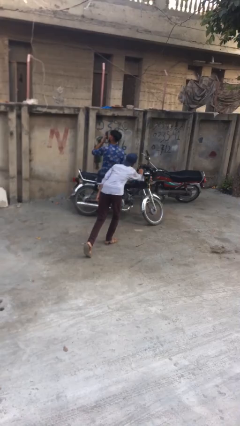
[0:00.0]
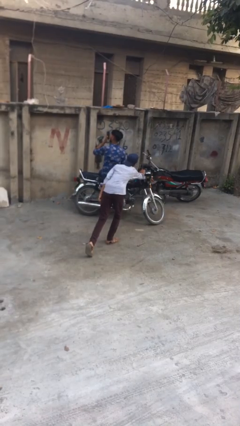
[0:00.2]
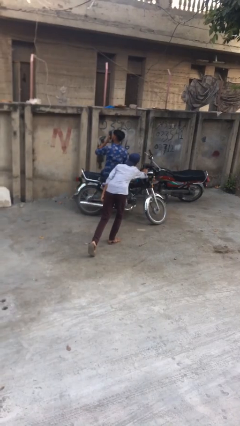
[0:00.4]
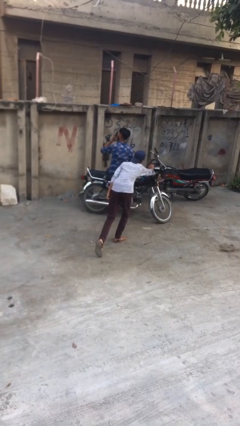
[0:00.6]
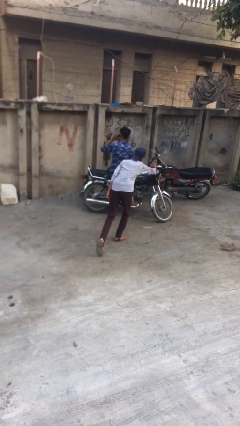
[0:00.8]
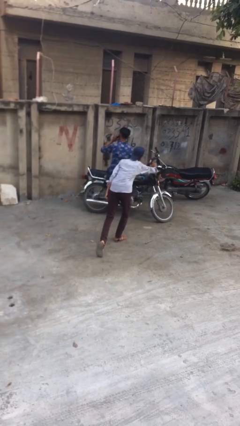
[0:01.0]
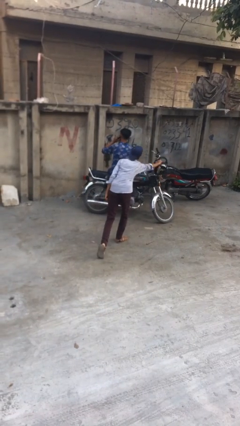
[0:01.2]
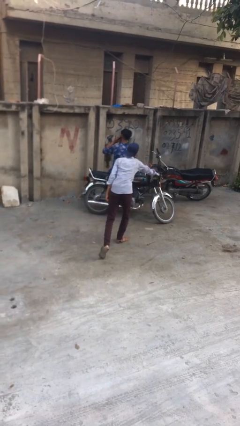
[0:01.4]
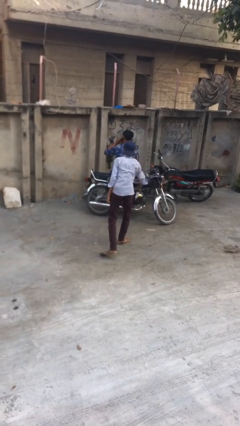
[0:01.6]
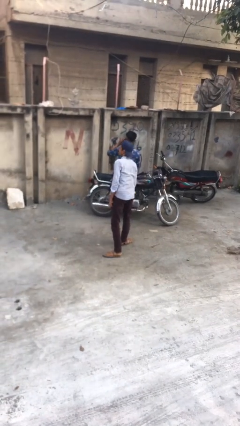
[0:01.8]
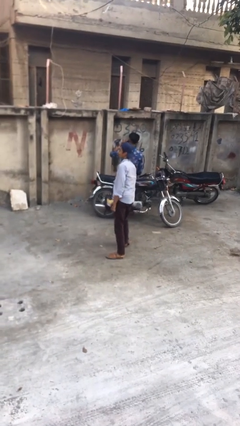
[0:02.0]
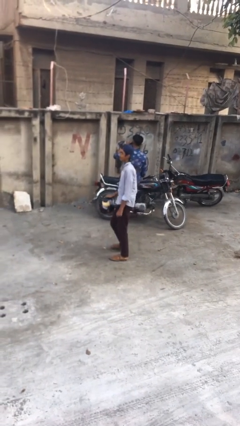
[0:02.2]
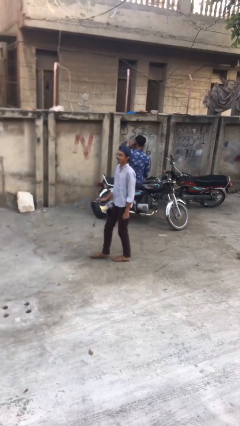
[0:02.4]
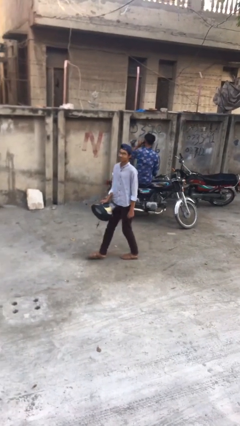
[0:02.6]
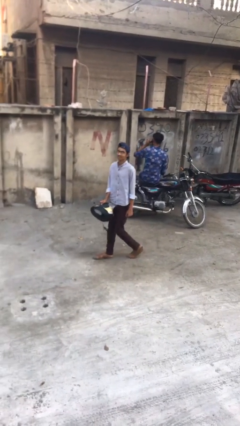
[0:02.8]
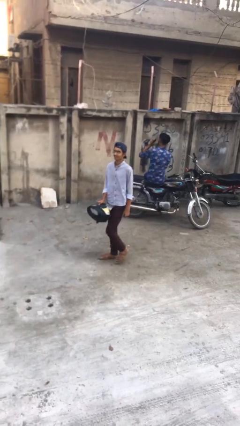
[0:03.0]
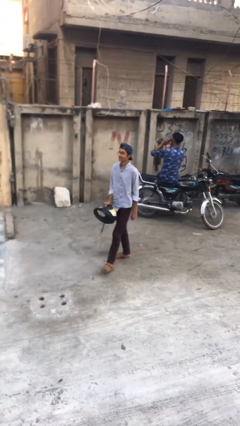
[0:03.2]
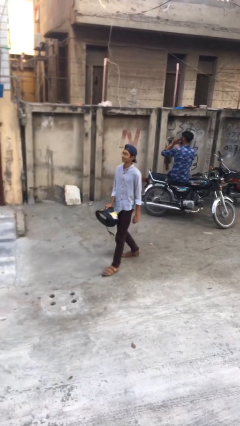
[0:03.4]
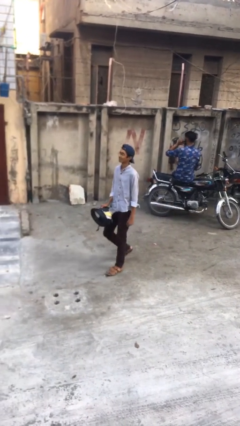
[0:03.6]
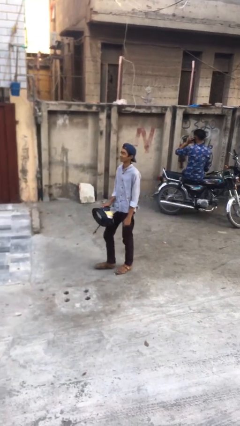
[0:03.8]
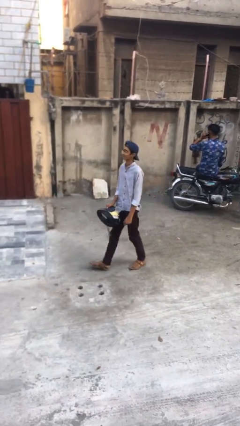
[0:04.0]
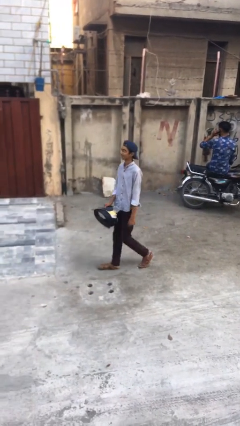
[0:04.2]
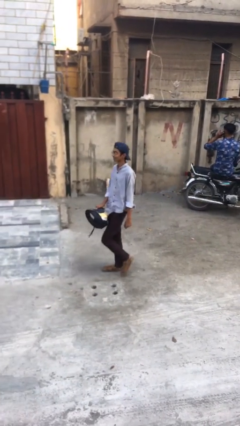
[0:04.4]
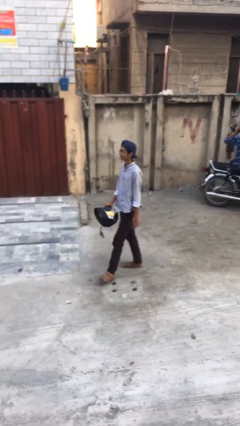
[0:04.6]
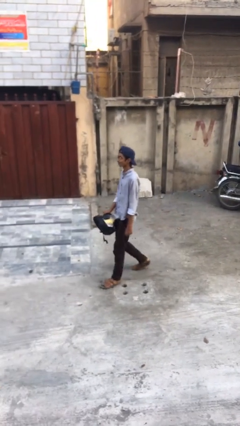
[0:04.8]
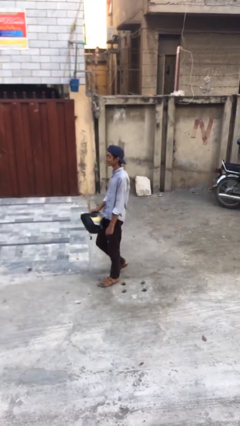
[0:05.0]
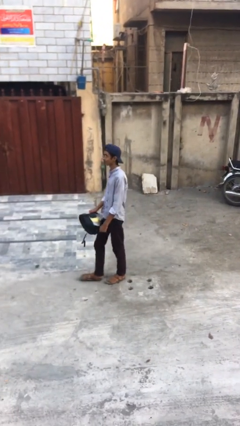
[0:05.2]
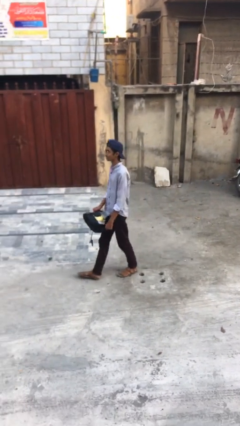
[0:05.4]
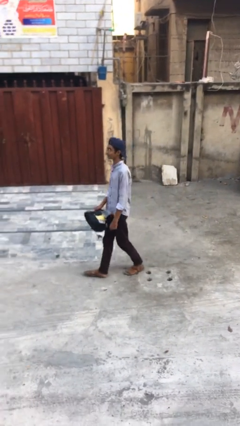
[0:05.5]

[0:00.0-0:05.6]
person steals object from person

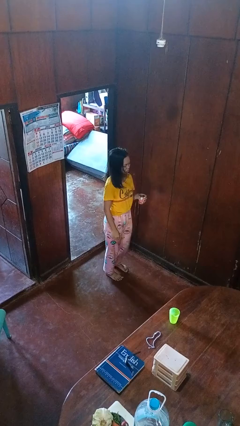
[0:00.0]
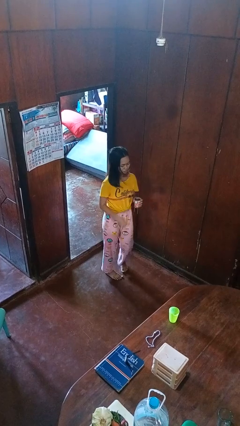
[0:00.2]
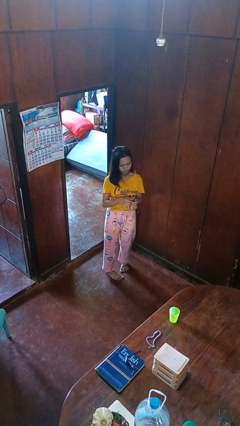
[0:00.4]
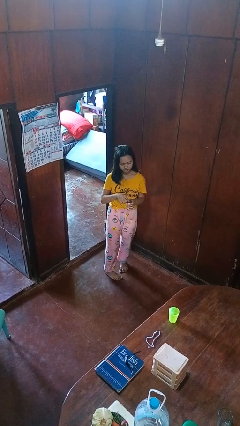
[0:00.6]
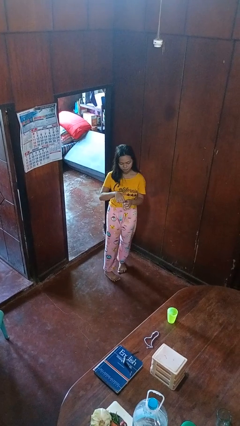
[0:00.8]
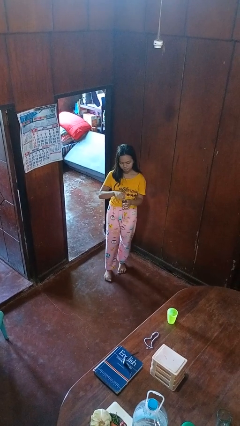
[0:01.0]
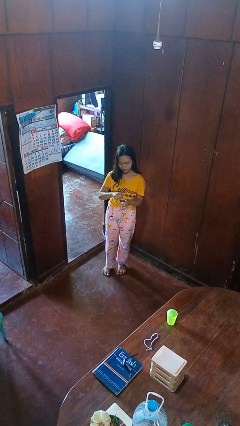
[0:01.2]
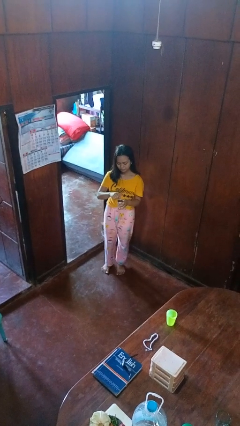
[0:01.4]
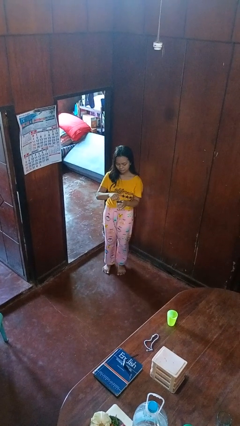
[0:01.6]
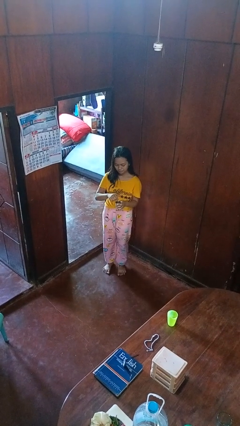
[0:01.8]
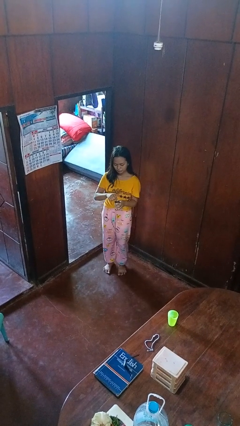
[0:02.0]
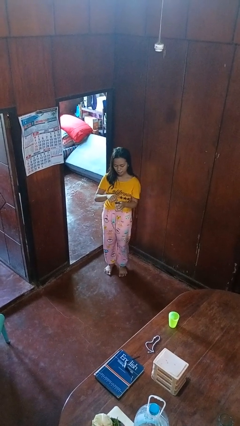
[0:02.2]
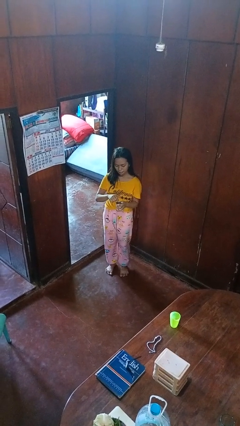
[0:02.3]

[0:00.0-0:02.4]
person opens beverage can

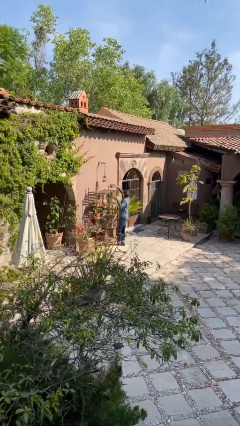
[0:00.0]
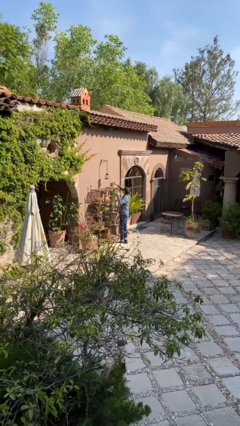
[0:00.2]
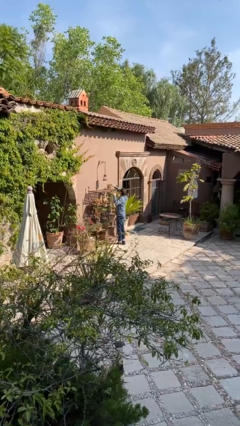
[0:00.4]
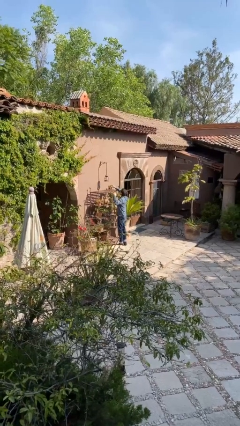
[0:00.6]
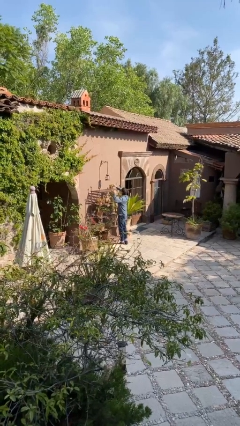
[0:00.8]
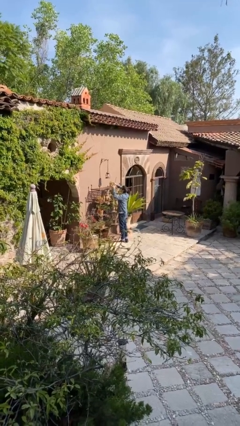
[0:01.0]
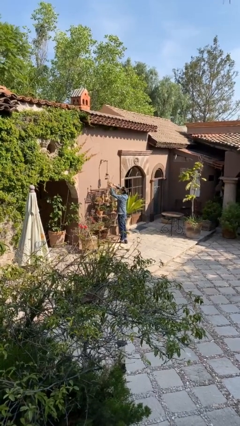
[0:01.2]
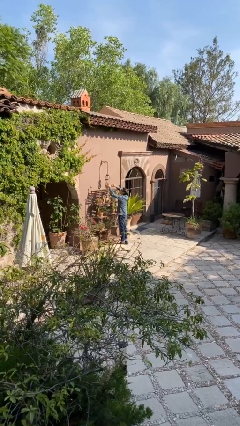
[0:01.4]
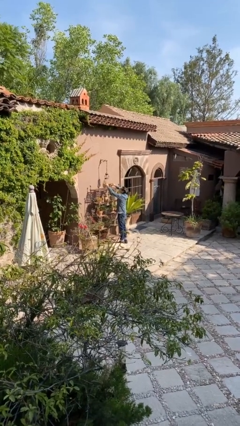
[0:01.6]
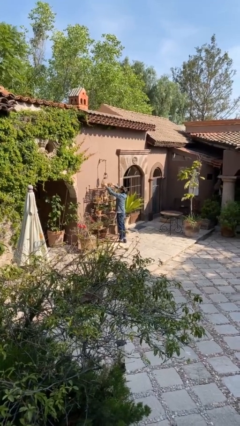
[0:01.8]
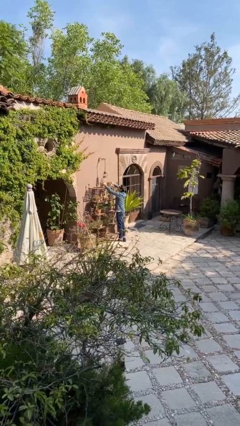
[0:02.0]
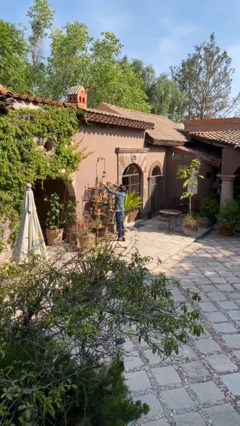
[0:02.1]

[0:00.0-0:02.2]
person puts down object on shelf

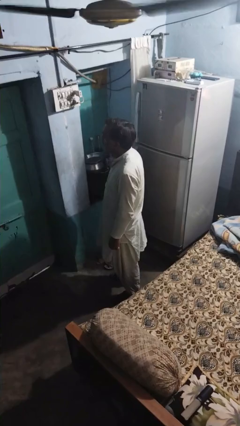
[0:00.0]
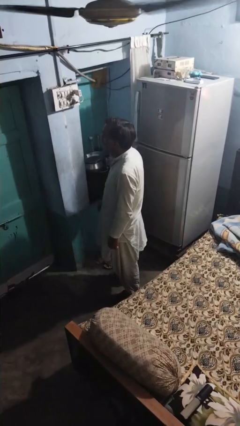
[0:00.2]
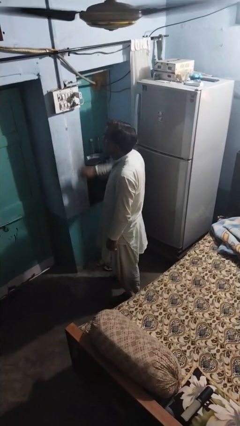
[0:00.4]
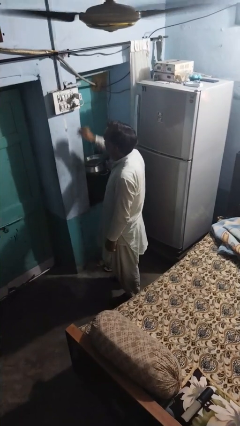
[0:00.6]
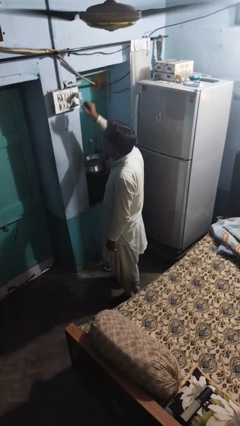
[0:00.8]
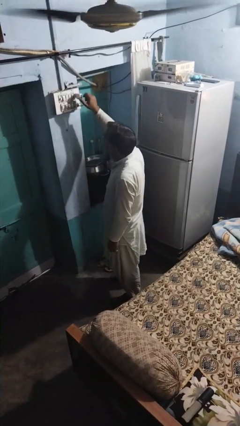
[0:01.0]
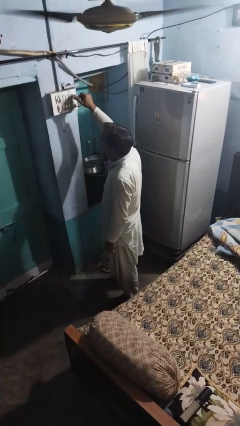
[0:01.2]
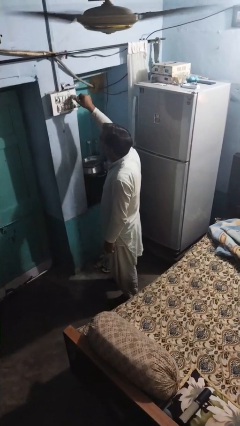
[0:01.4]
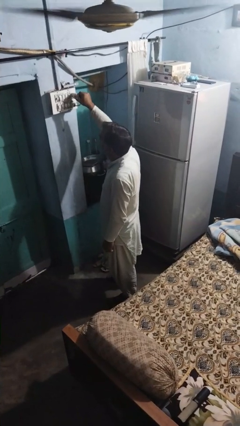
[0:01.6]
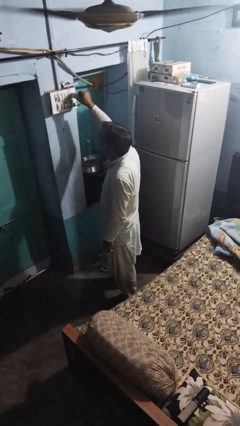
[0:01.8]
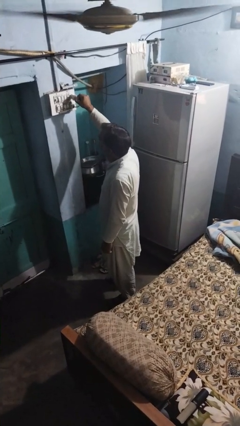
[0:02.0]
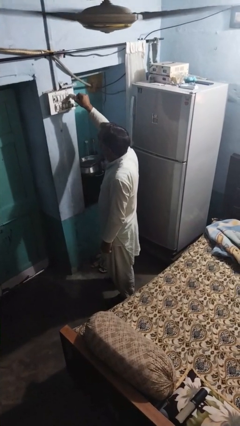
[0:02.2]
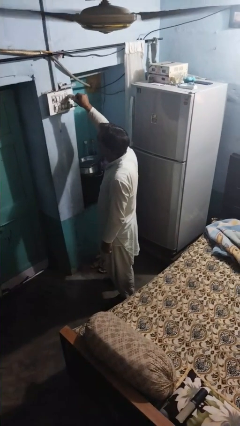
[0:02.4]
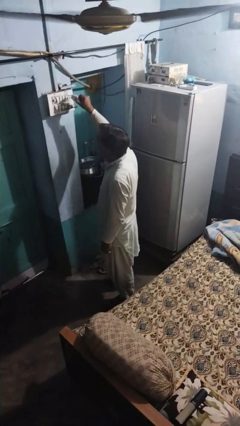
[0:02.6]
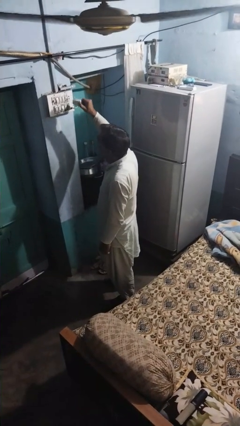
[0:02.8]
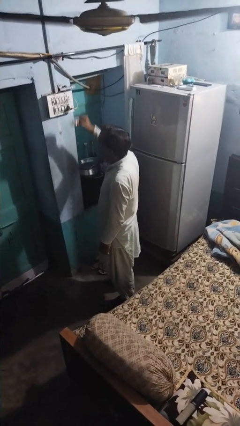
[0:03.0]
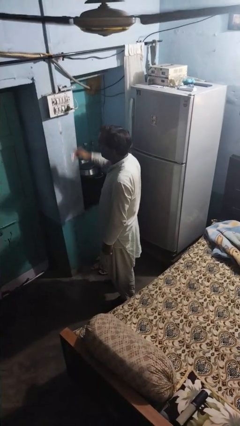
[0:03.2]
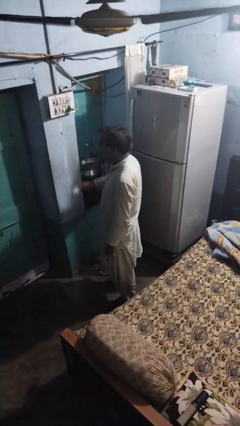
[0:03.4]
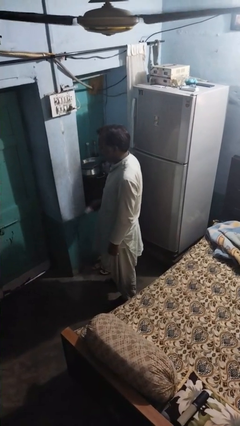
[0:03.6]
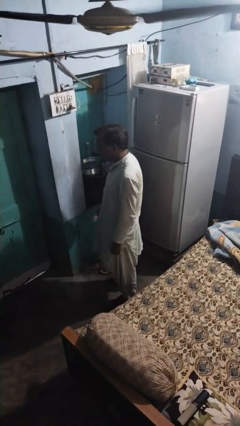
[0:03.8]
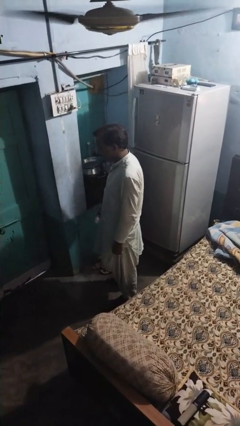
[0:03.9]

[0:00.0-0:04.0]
person unplugs from electrical socket

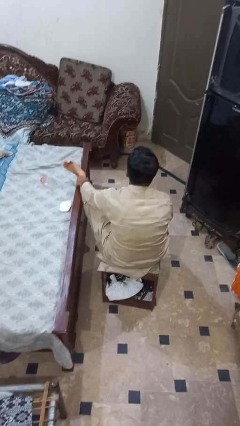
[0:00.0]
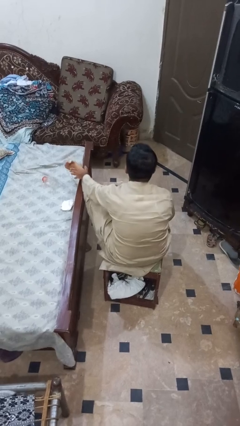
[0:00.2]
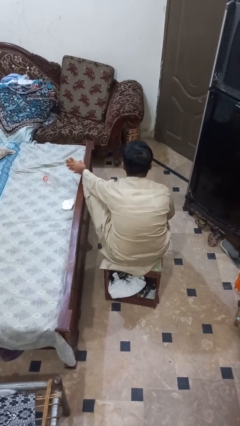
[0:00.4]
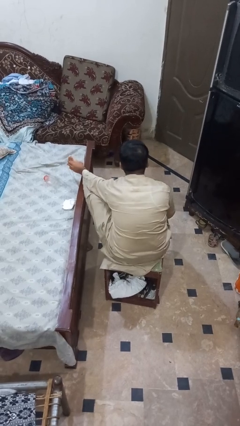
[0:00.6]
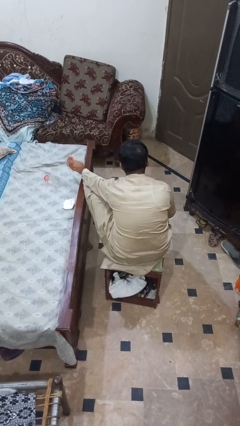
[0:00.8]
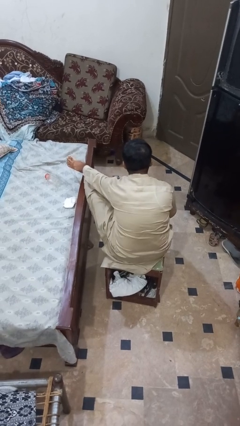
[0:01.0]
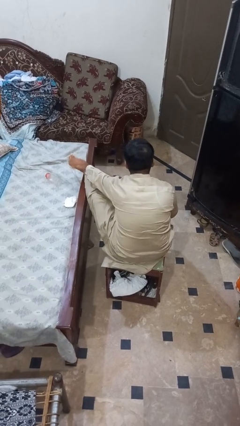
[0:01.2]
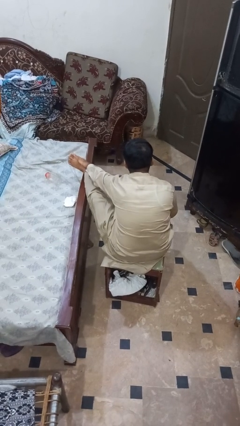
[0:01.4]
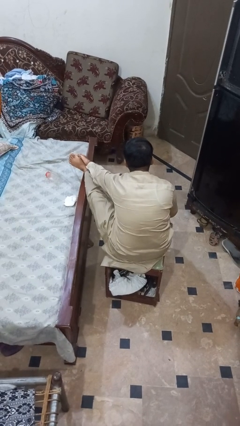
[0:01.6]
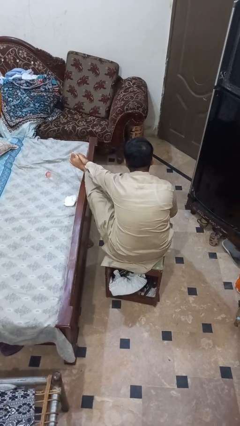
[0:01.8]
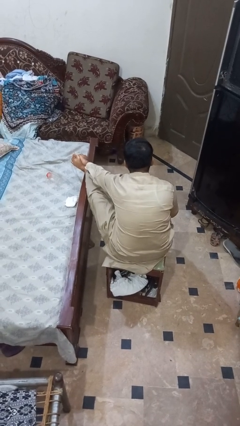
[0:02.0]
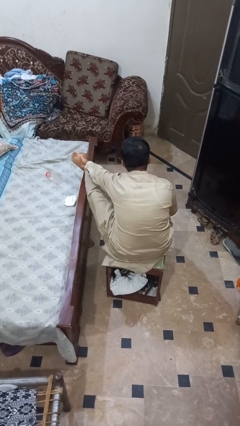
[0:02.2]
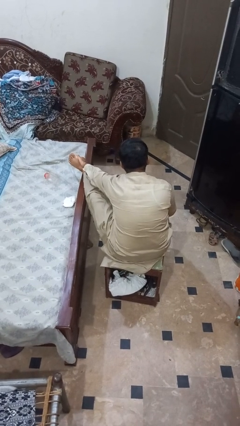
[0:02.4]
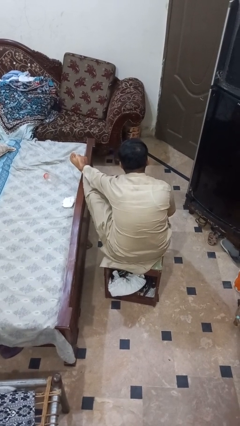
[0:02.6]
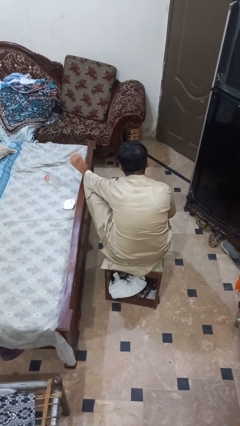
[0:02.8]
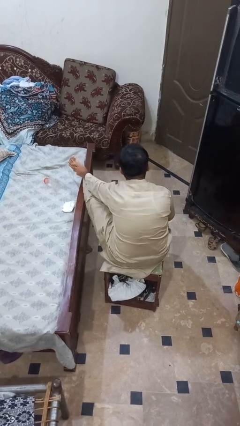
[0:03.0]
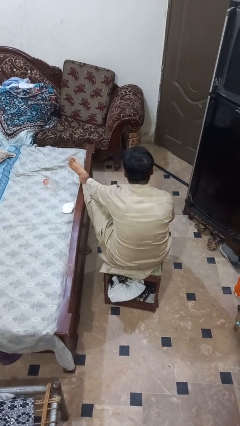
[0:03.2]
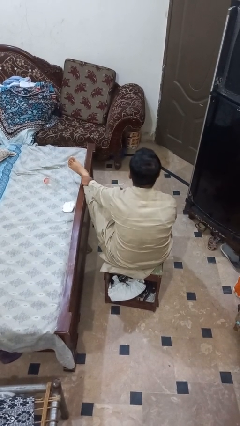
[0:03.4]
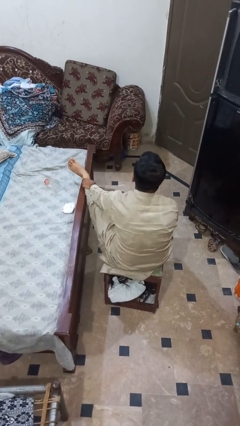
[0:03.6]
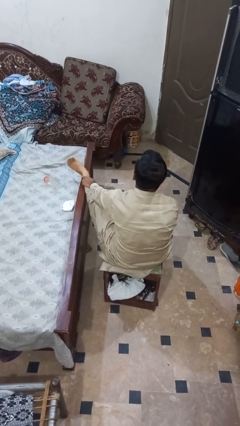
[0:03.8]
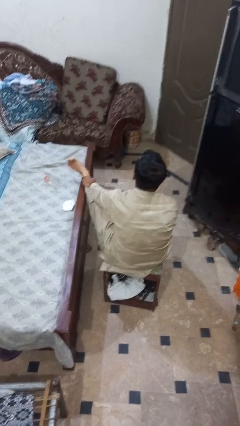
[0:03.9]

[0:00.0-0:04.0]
person rubs foot
